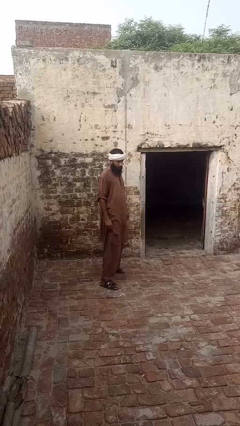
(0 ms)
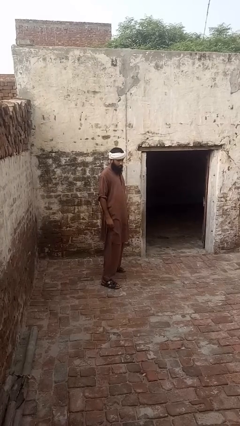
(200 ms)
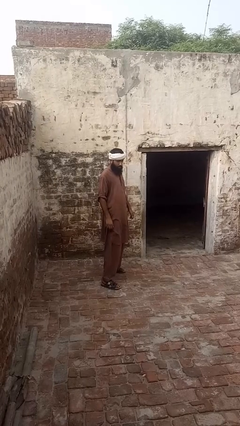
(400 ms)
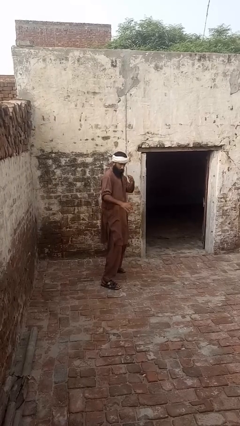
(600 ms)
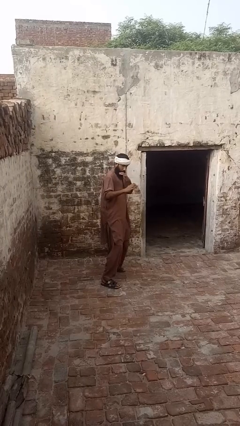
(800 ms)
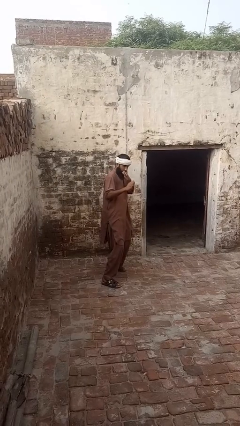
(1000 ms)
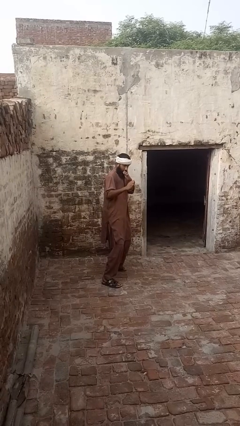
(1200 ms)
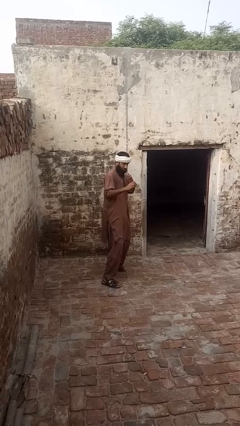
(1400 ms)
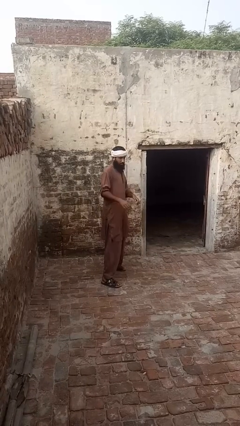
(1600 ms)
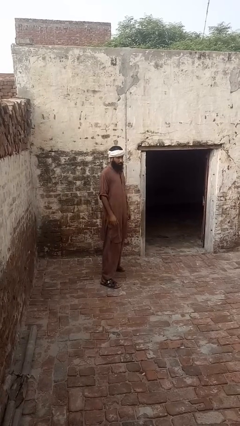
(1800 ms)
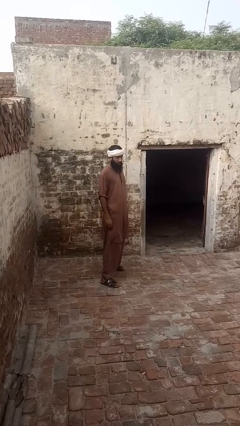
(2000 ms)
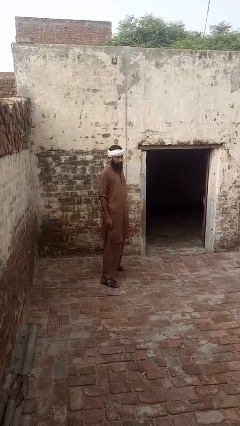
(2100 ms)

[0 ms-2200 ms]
person karate chop

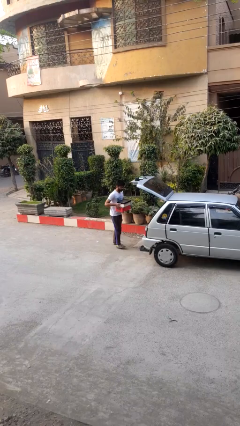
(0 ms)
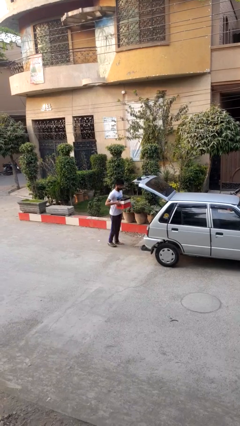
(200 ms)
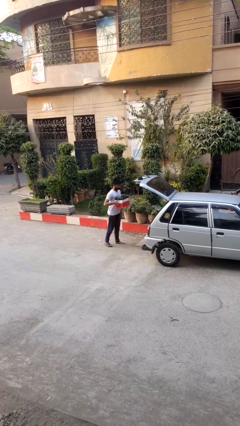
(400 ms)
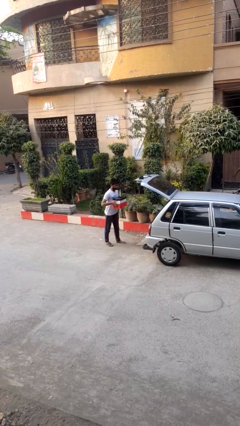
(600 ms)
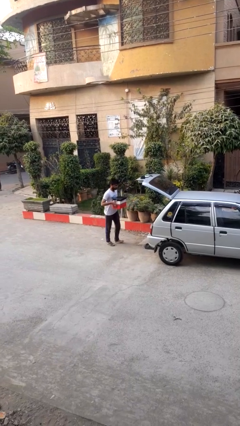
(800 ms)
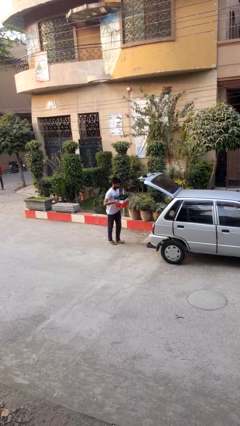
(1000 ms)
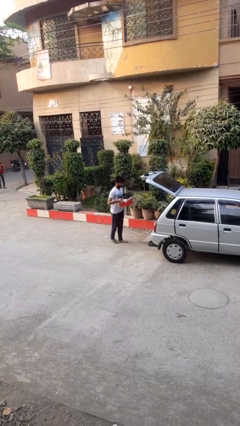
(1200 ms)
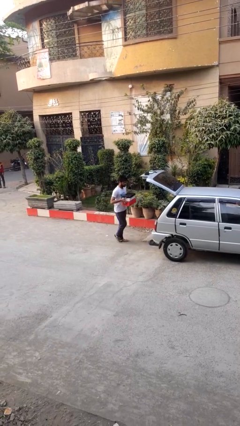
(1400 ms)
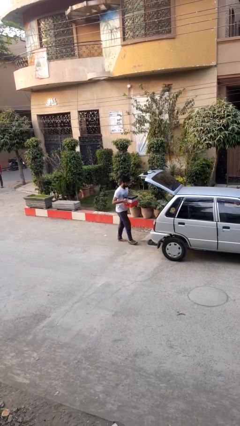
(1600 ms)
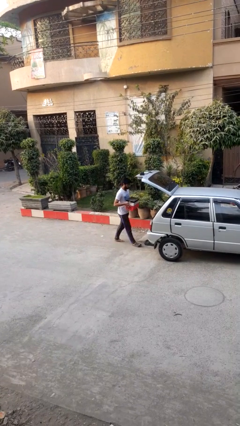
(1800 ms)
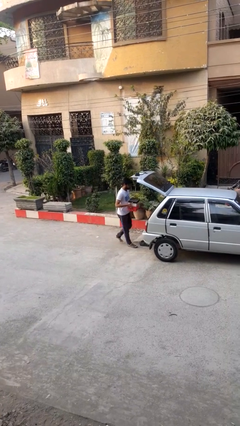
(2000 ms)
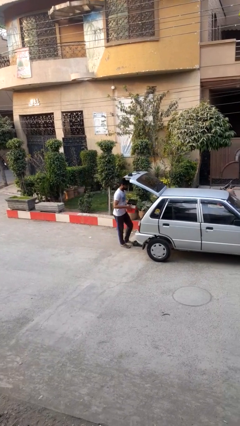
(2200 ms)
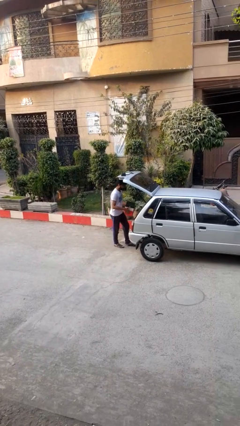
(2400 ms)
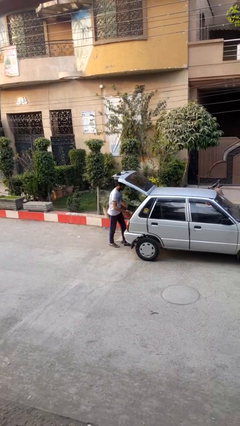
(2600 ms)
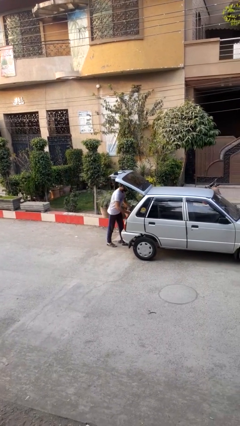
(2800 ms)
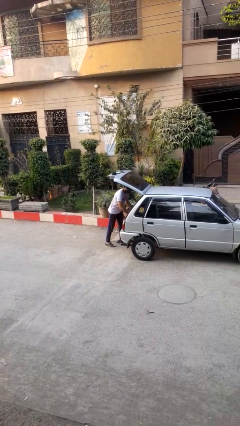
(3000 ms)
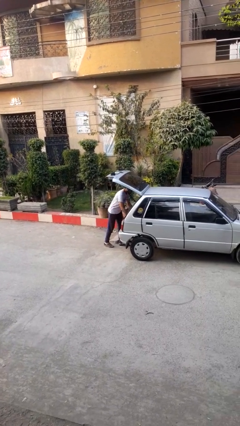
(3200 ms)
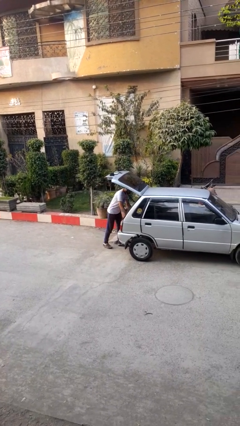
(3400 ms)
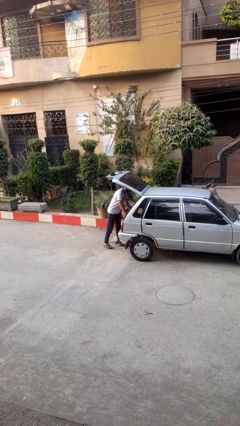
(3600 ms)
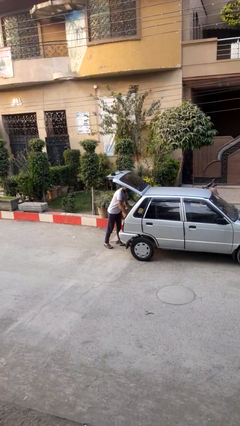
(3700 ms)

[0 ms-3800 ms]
person loads car

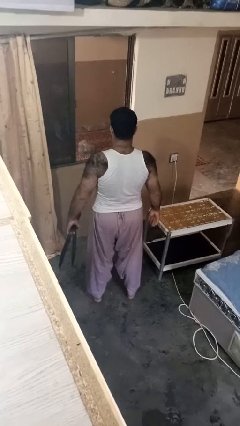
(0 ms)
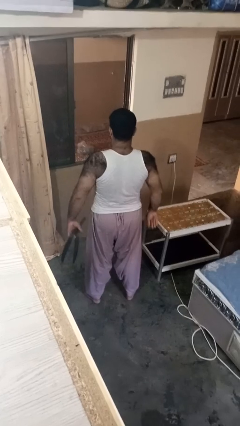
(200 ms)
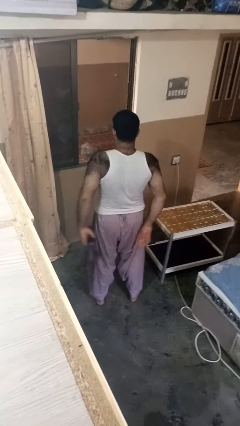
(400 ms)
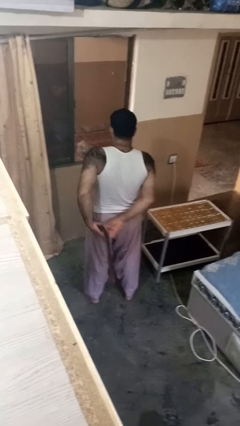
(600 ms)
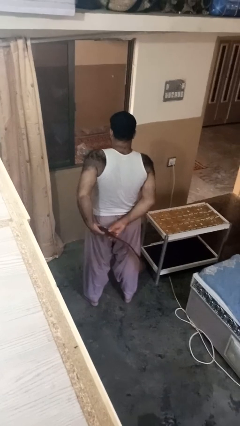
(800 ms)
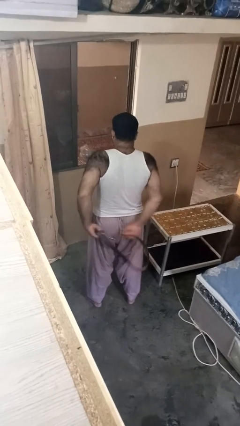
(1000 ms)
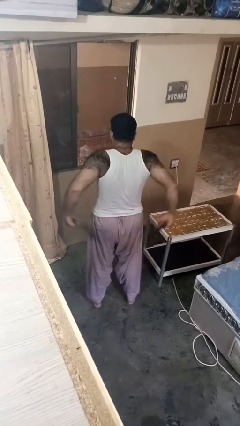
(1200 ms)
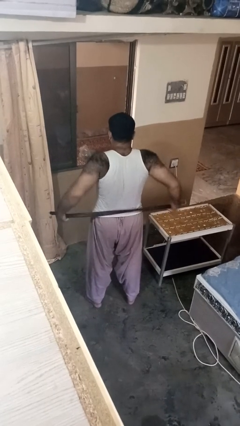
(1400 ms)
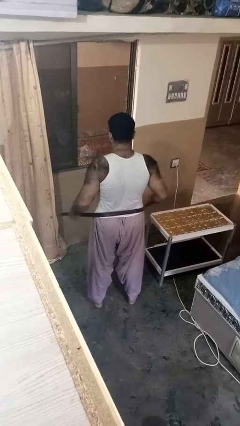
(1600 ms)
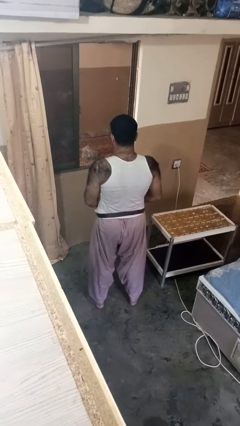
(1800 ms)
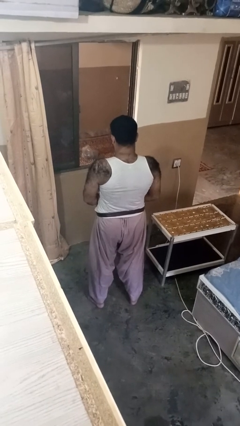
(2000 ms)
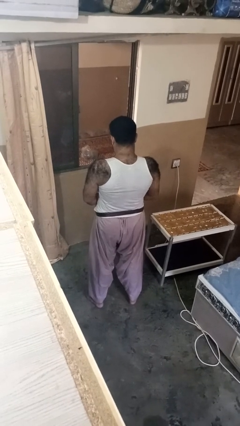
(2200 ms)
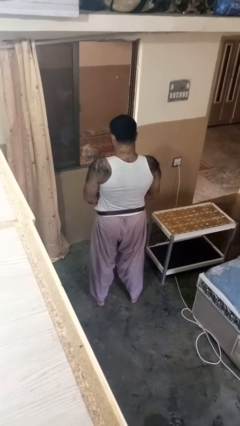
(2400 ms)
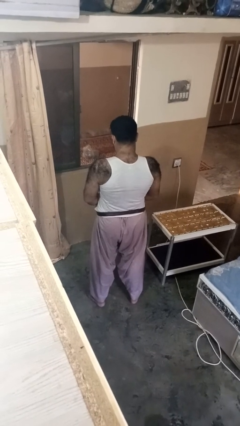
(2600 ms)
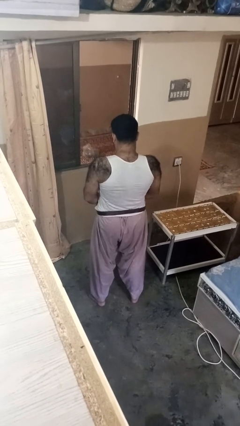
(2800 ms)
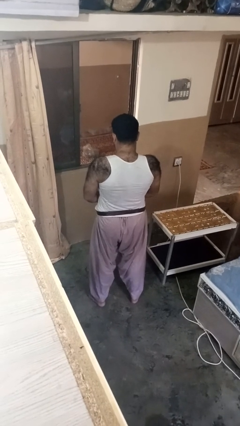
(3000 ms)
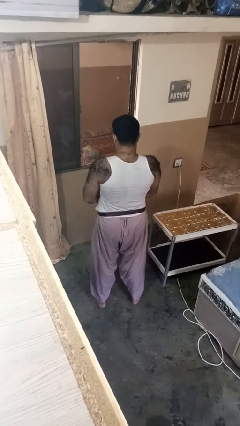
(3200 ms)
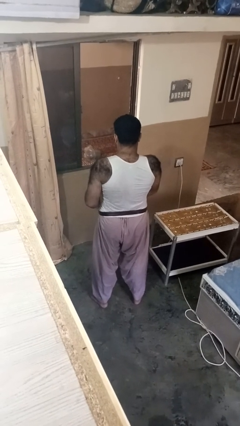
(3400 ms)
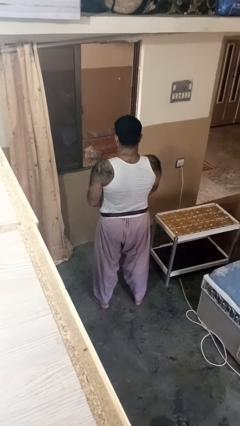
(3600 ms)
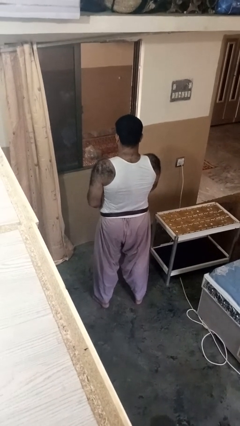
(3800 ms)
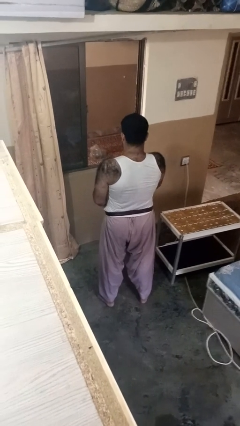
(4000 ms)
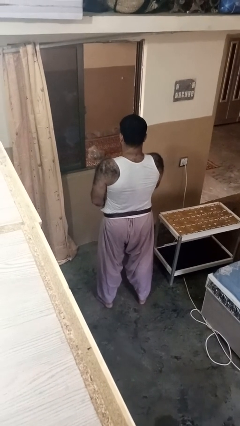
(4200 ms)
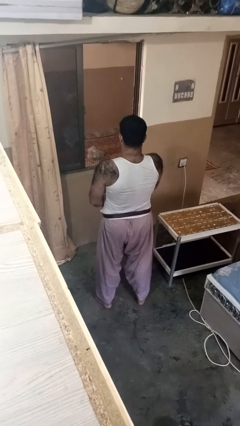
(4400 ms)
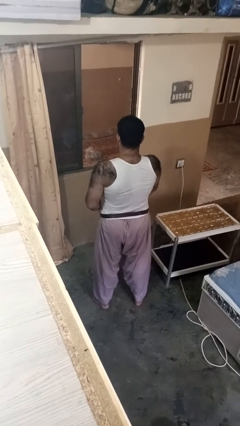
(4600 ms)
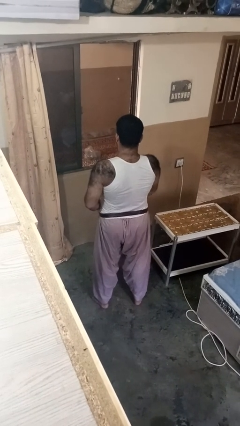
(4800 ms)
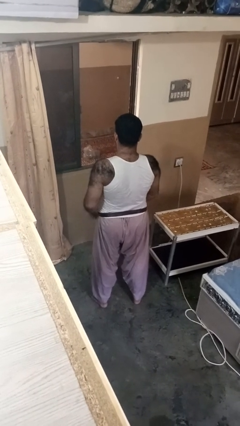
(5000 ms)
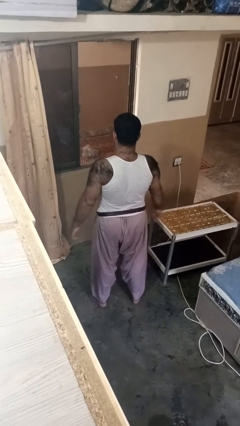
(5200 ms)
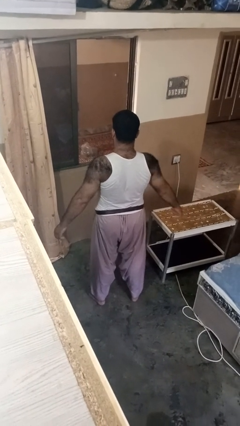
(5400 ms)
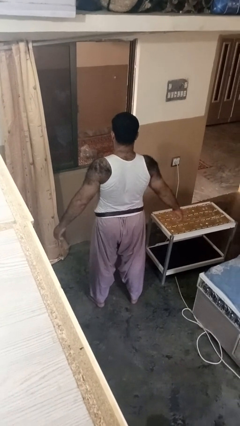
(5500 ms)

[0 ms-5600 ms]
person puts on belt

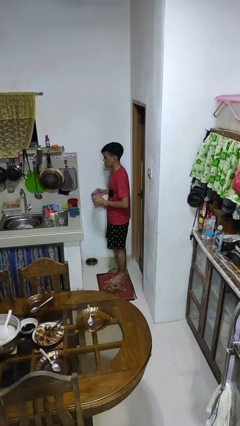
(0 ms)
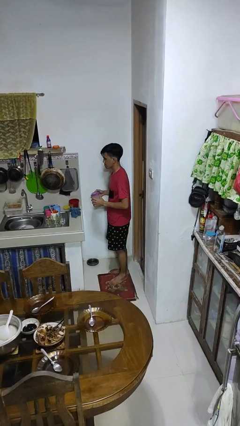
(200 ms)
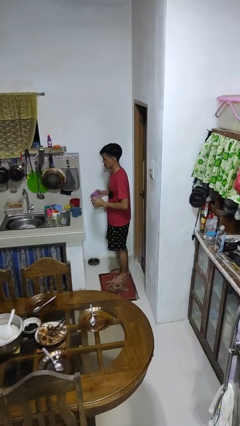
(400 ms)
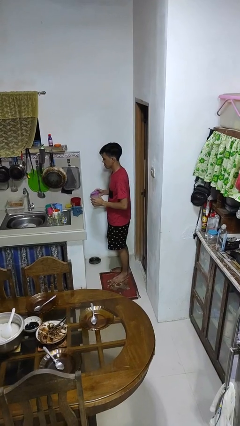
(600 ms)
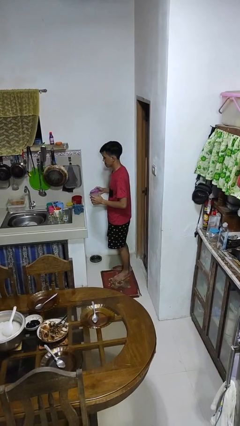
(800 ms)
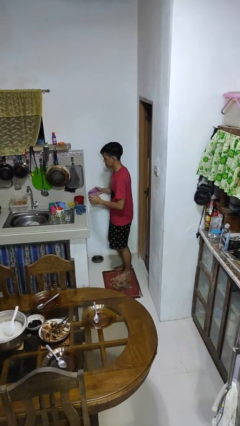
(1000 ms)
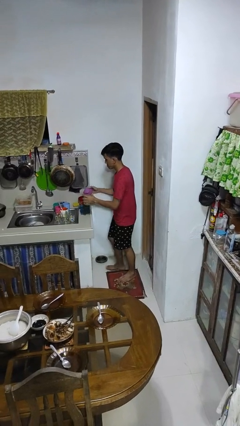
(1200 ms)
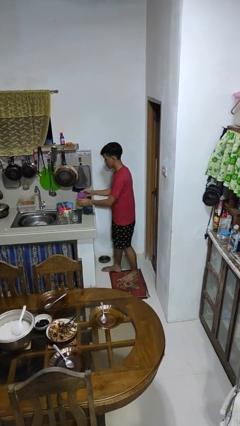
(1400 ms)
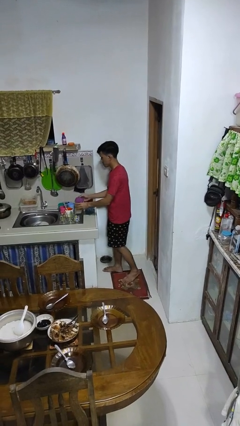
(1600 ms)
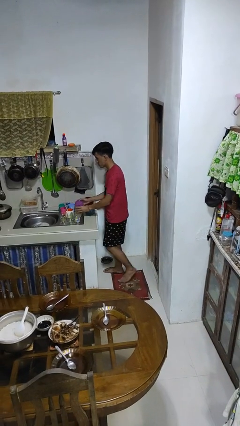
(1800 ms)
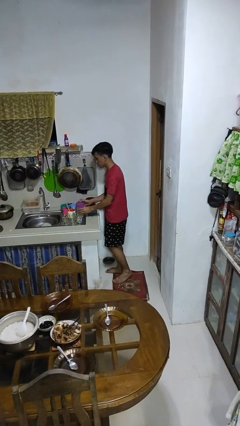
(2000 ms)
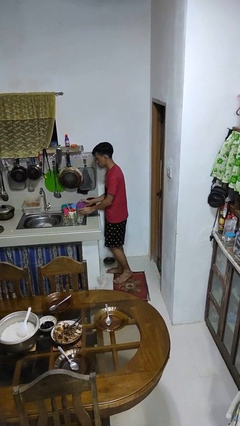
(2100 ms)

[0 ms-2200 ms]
person puts down object on countertop

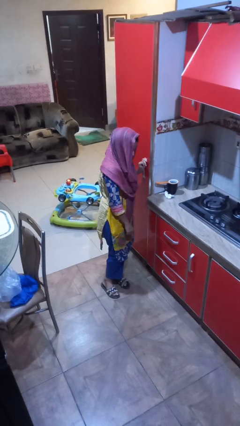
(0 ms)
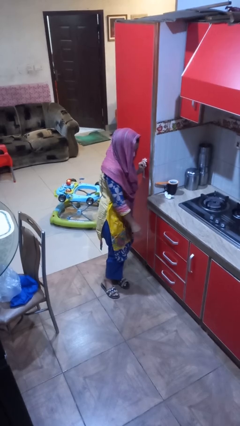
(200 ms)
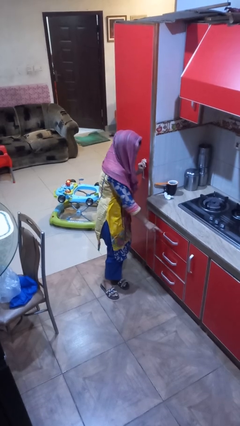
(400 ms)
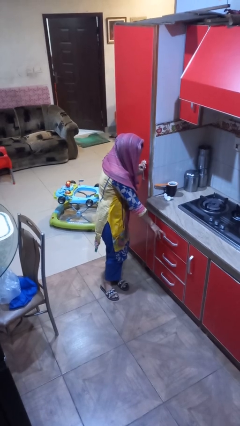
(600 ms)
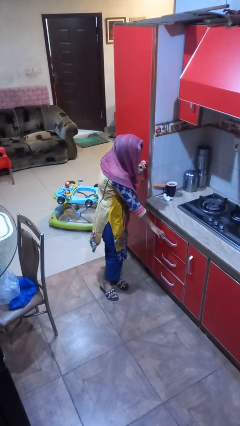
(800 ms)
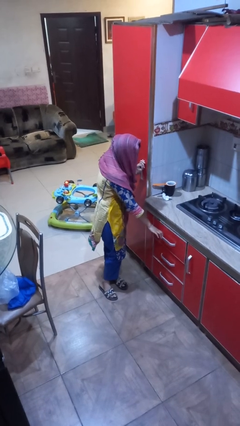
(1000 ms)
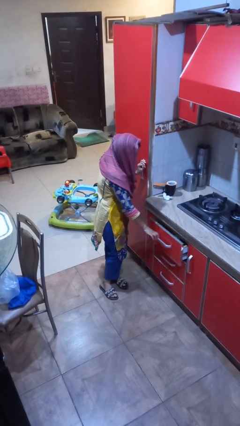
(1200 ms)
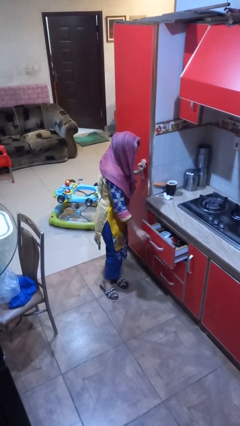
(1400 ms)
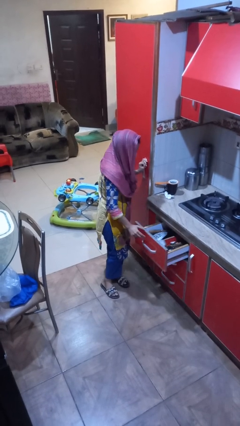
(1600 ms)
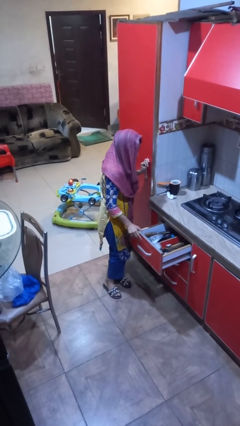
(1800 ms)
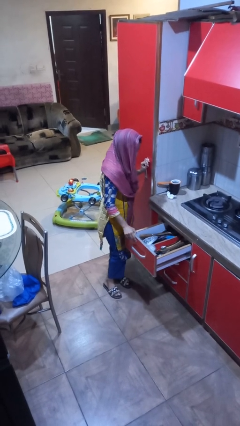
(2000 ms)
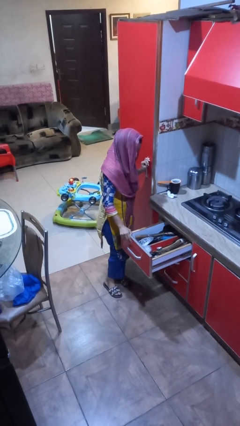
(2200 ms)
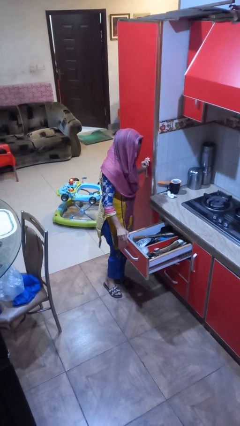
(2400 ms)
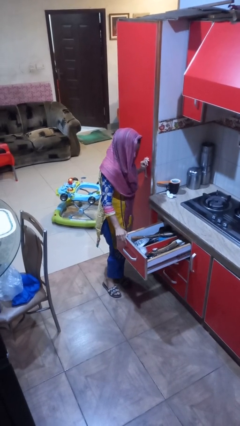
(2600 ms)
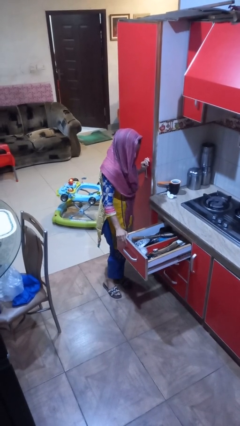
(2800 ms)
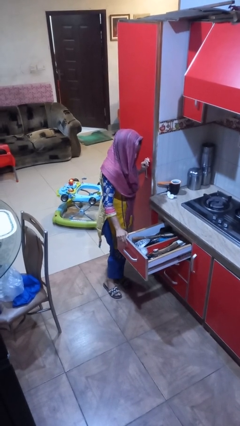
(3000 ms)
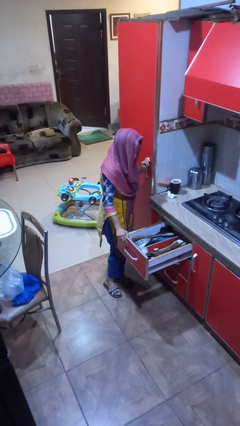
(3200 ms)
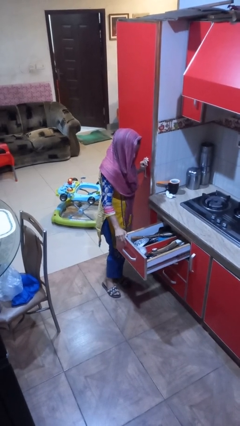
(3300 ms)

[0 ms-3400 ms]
person opens kitchen drawer

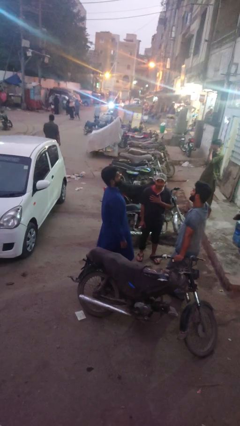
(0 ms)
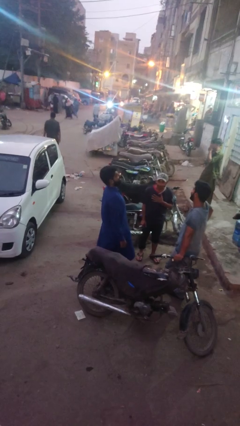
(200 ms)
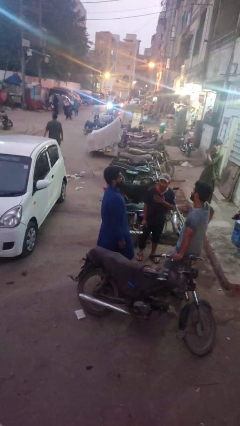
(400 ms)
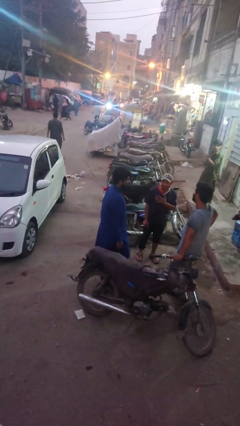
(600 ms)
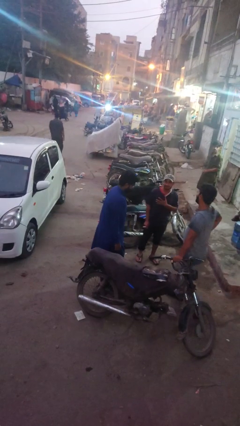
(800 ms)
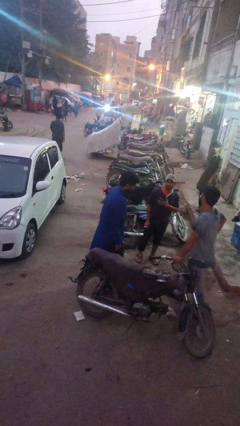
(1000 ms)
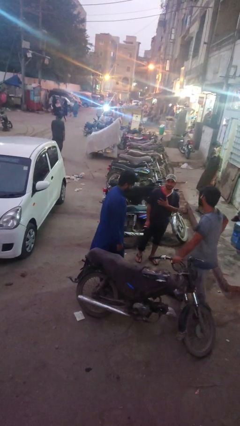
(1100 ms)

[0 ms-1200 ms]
person laughs with person
